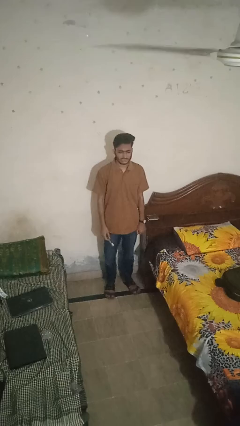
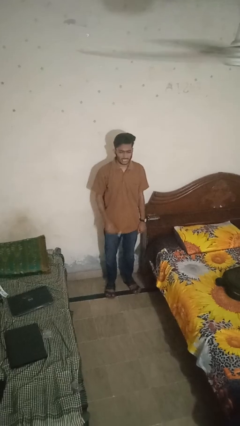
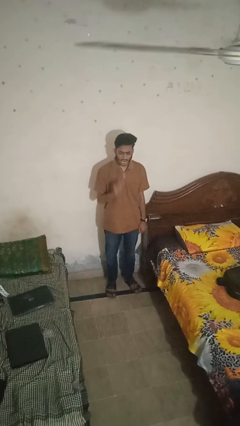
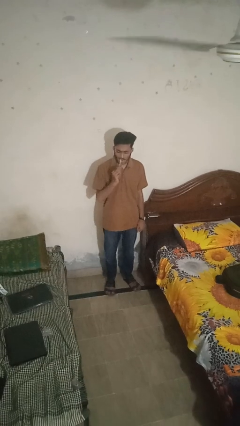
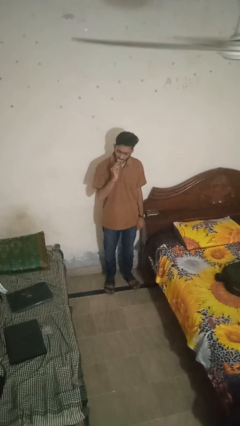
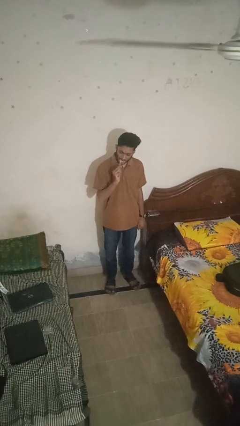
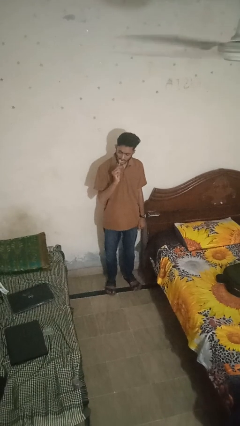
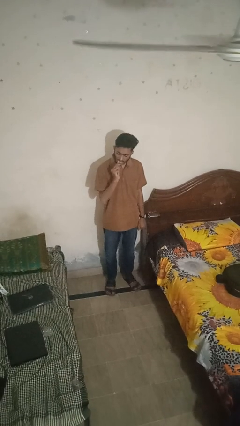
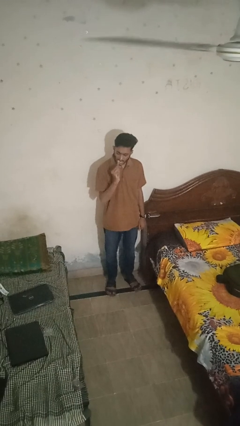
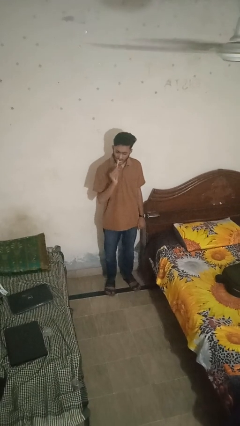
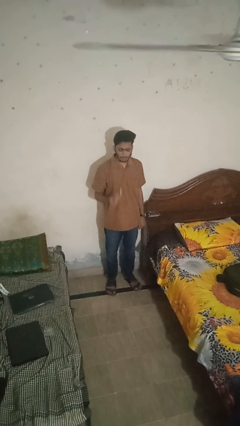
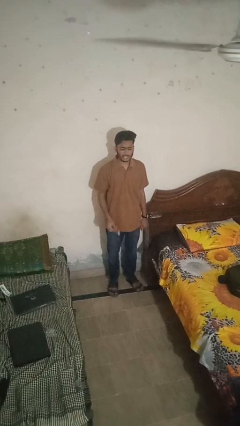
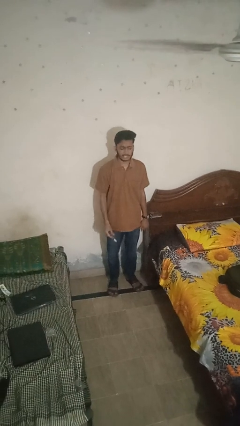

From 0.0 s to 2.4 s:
person brushes teeth

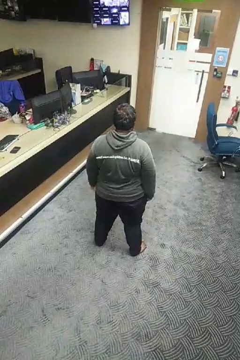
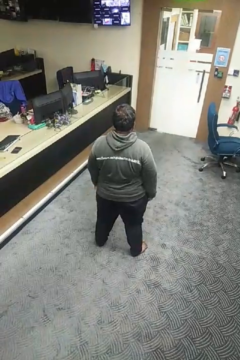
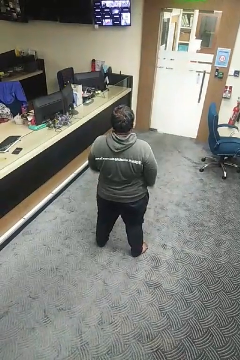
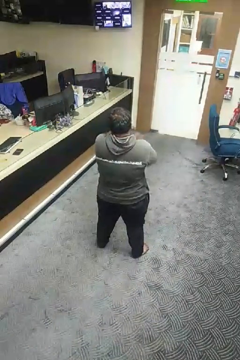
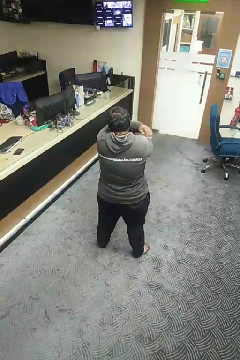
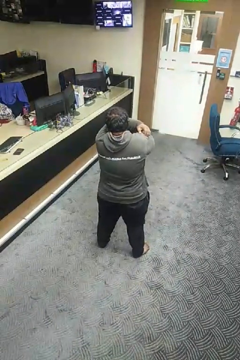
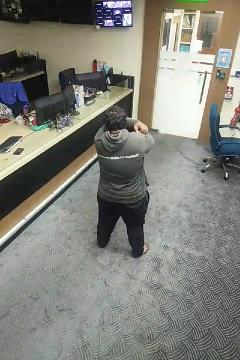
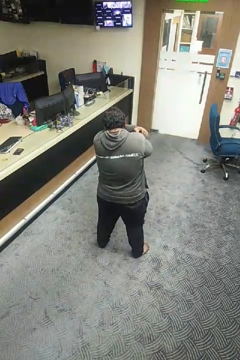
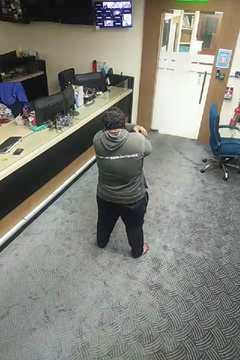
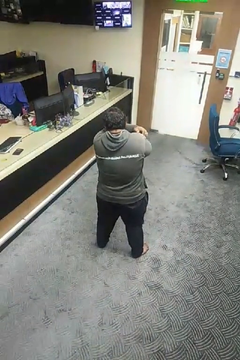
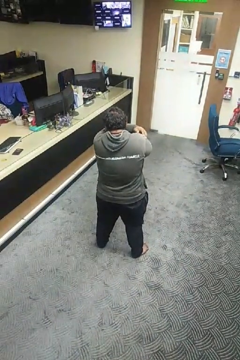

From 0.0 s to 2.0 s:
person sneezes into arm

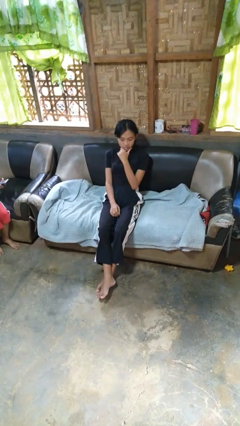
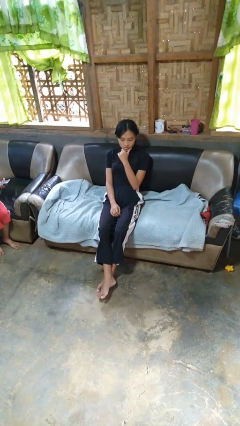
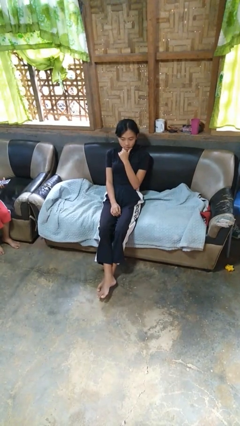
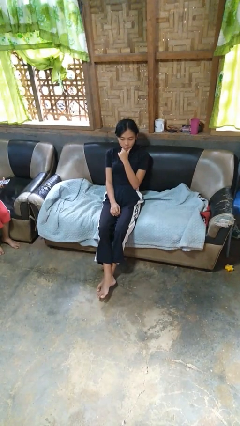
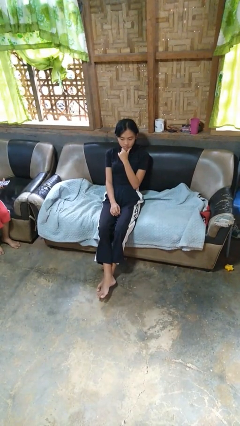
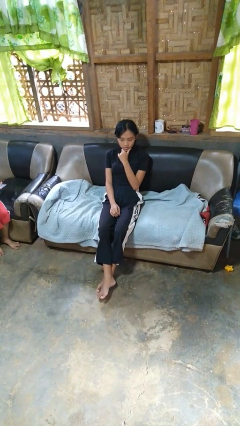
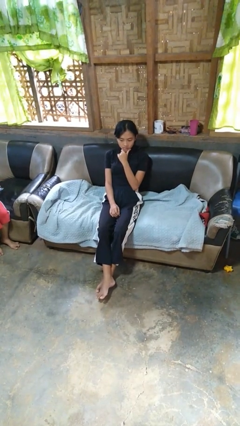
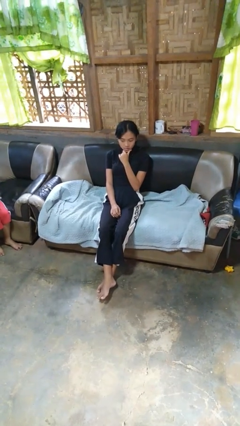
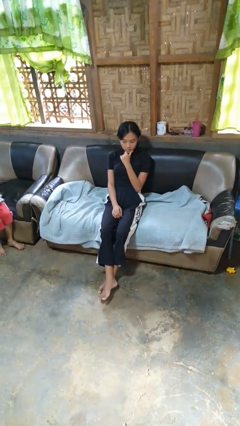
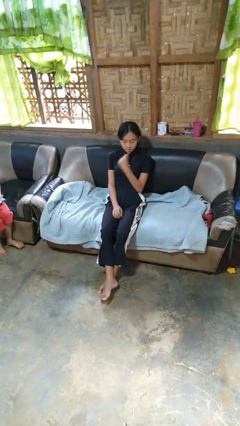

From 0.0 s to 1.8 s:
person strokes chin

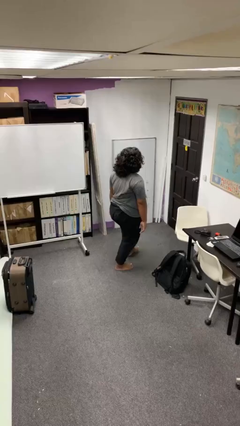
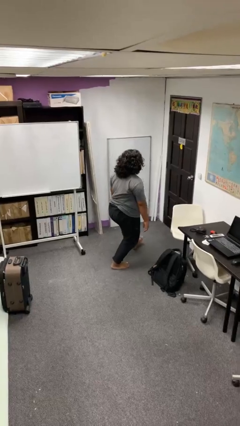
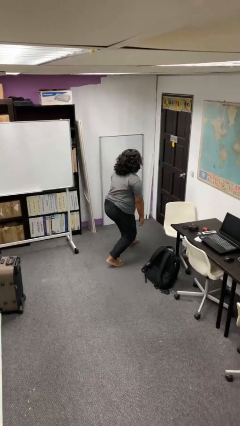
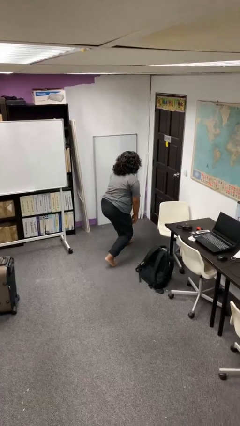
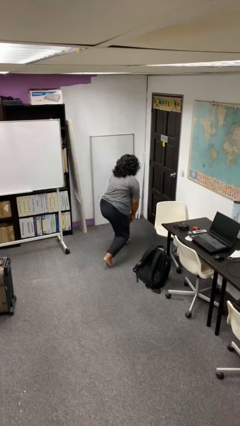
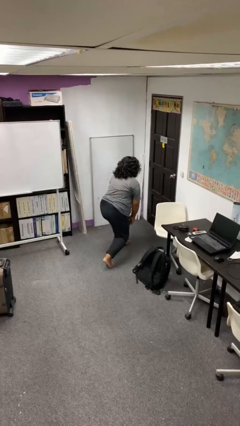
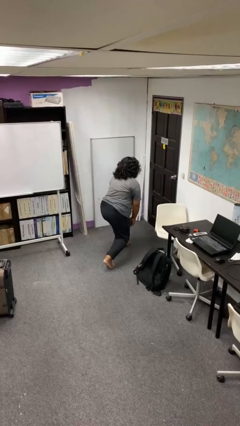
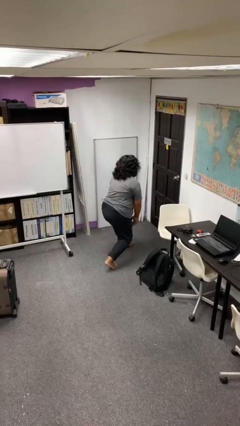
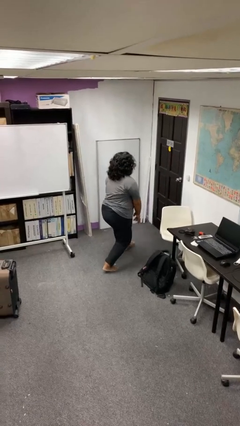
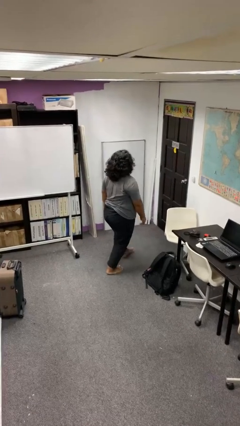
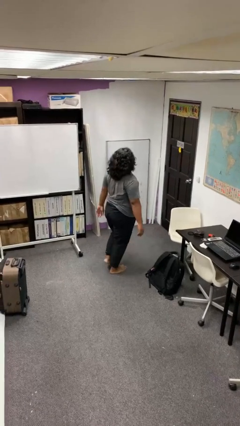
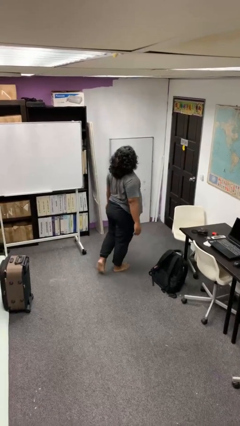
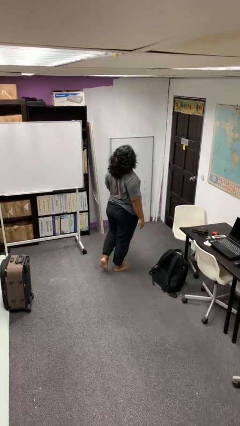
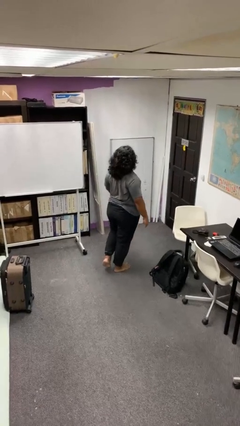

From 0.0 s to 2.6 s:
person exercises with lunges

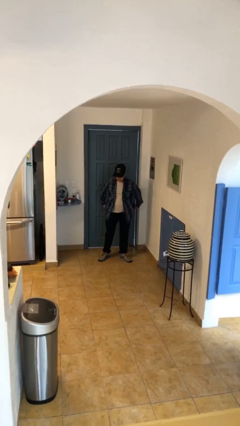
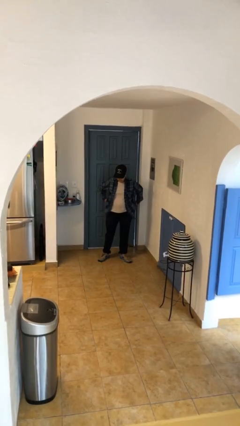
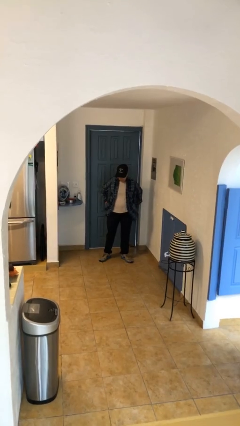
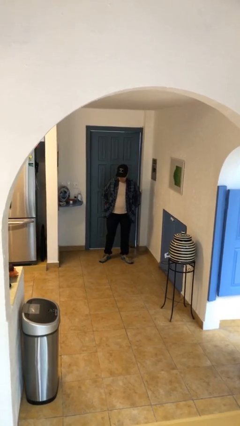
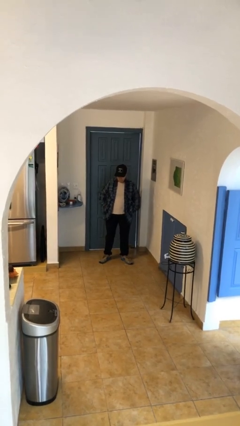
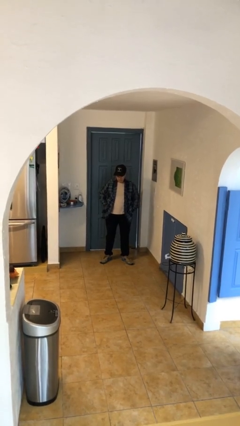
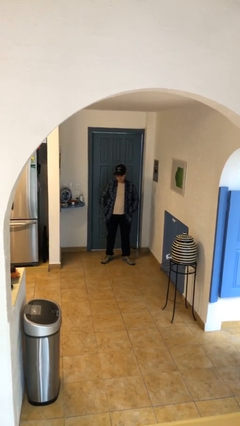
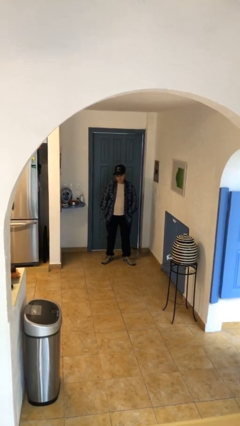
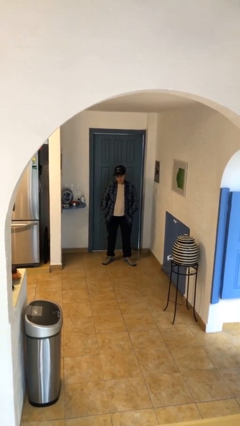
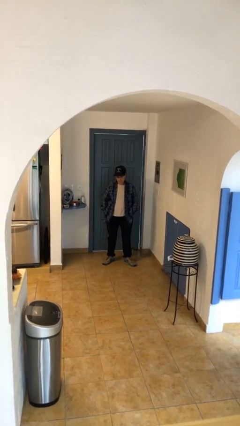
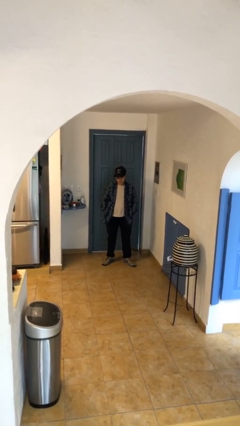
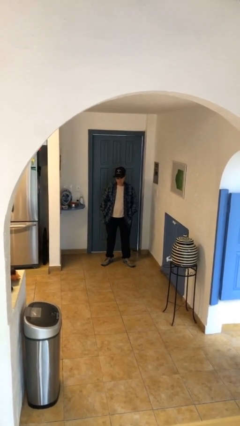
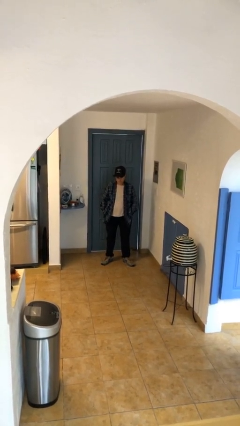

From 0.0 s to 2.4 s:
person puts hands in back pockets

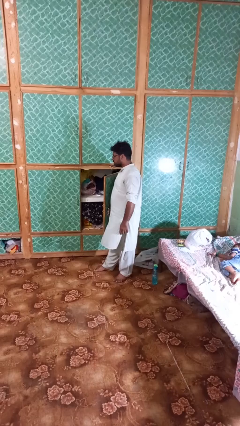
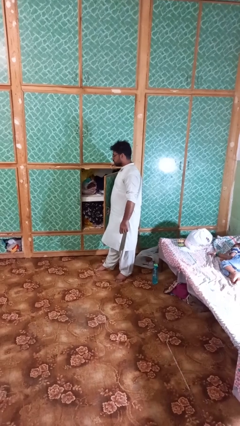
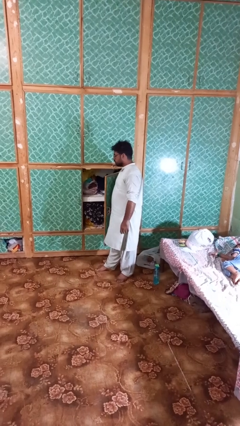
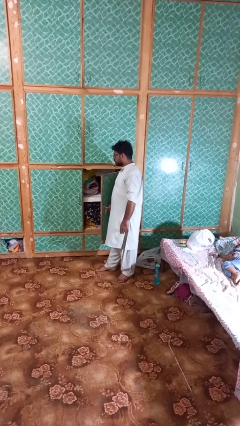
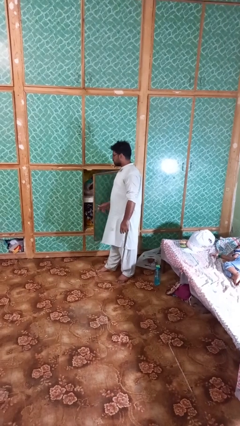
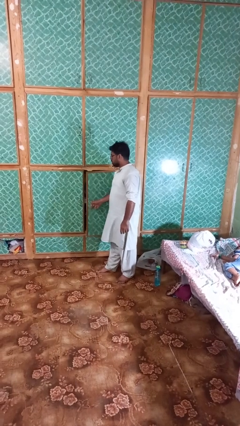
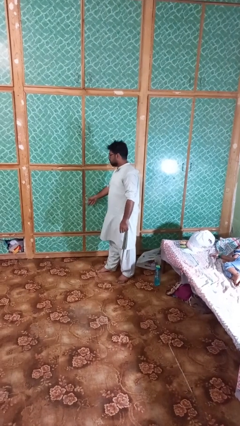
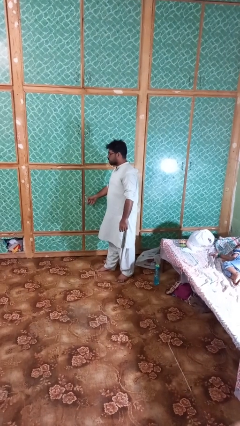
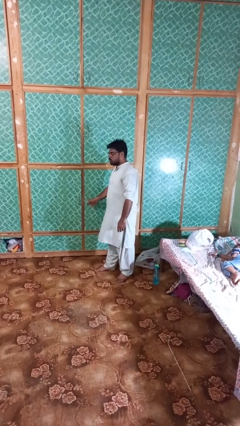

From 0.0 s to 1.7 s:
person closes closet door

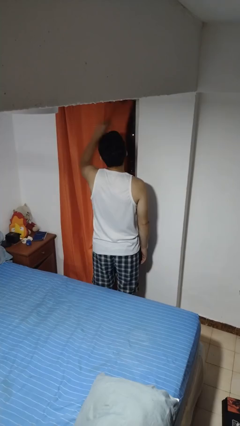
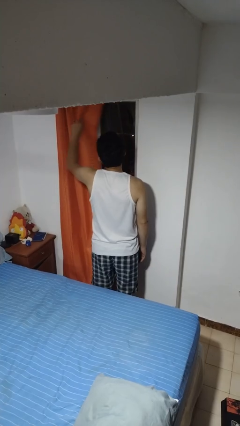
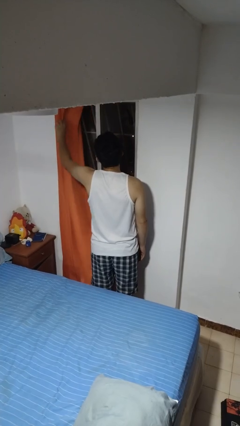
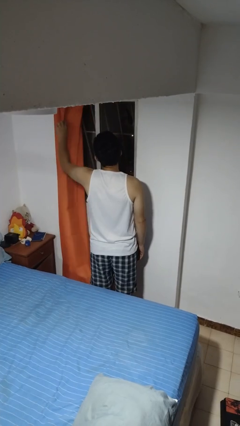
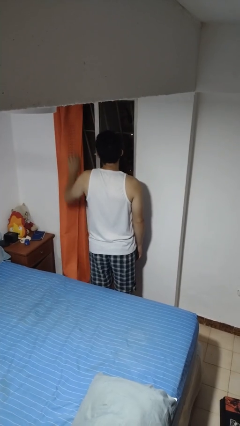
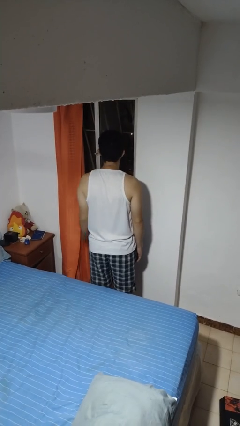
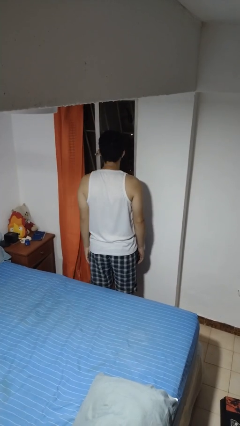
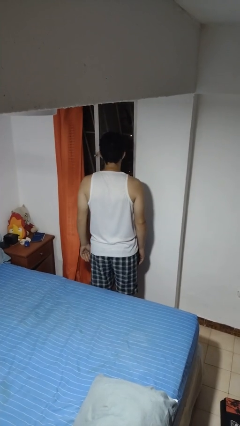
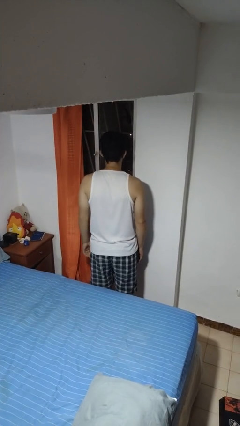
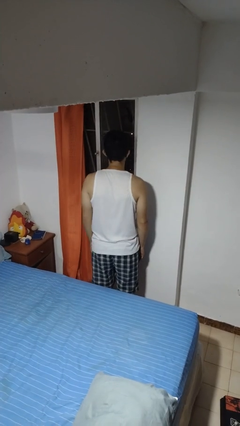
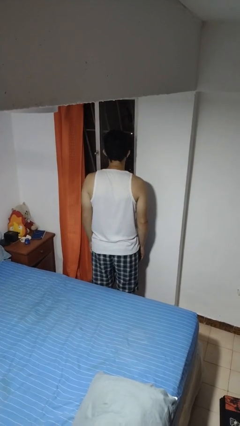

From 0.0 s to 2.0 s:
person opens curtains

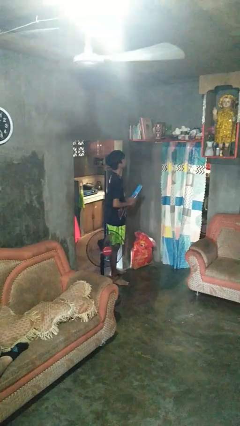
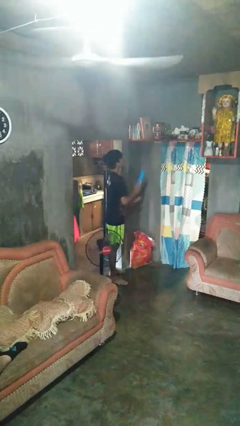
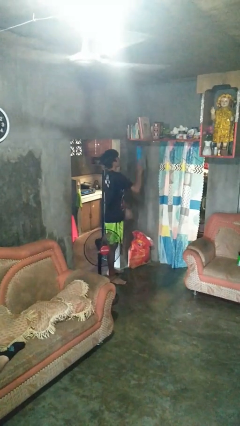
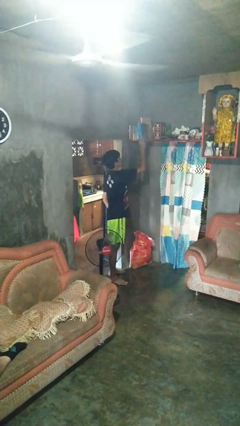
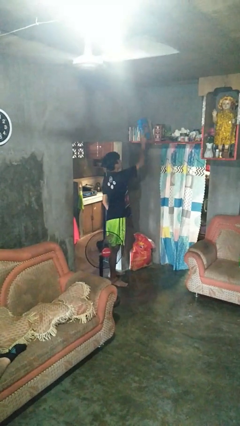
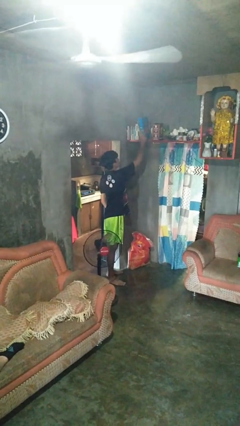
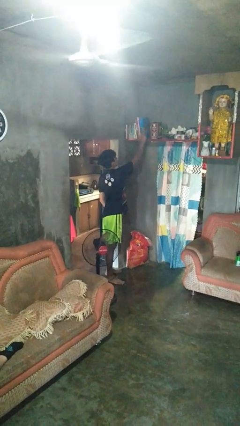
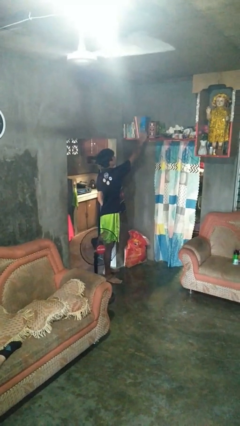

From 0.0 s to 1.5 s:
person puts down object on shelf

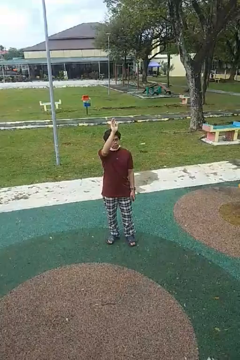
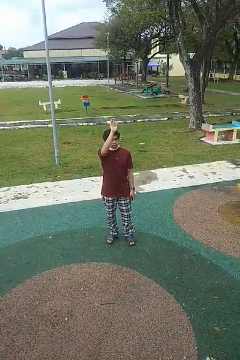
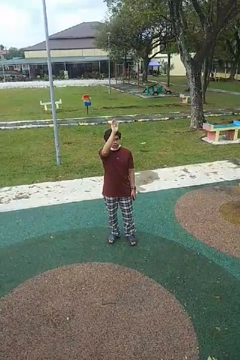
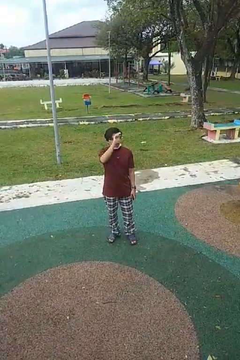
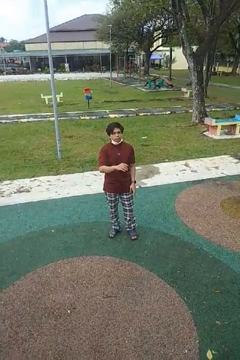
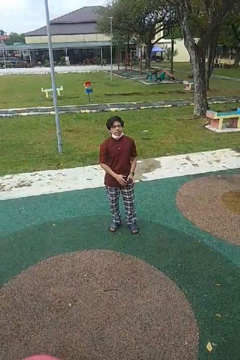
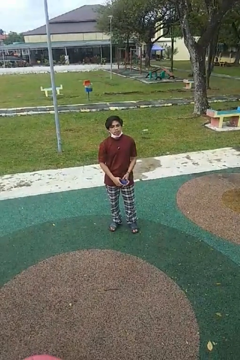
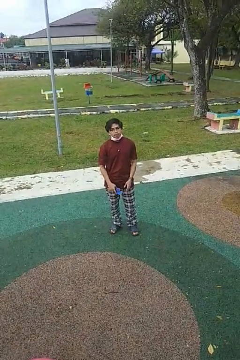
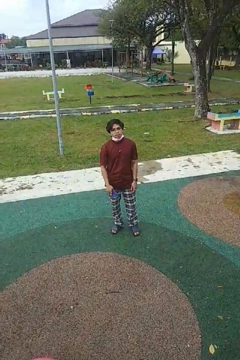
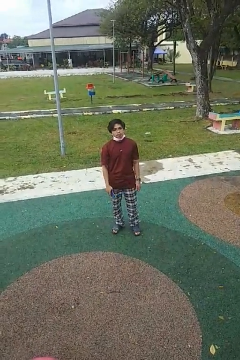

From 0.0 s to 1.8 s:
person gestures lower hand
